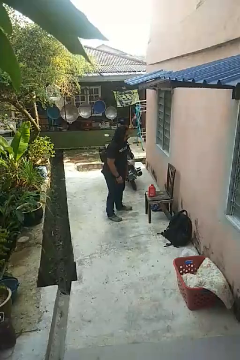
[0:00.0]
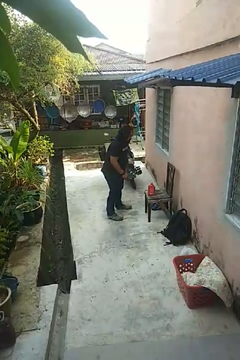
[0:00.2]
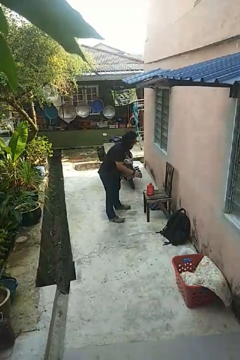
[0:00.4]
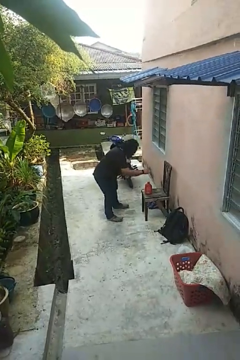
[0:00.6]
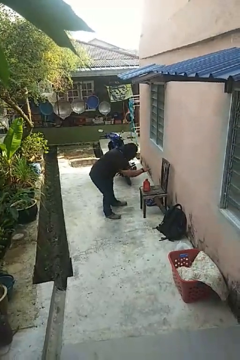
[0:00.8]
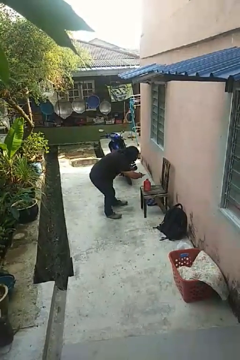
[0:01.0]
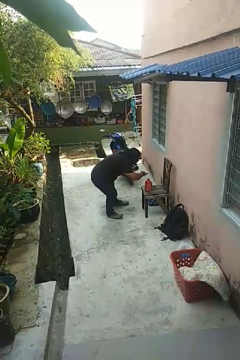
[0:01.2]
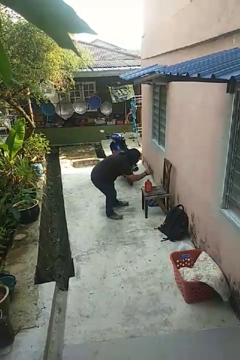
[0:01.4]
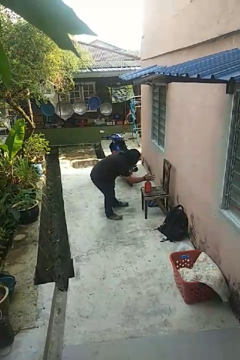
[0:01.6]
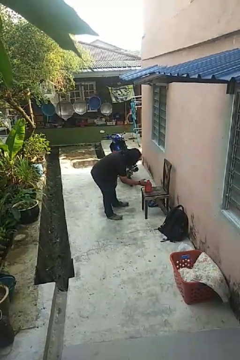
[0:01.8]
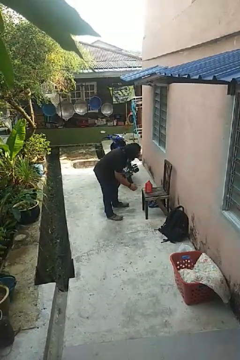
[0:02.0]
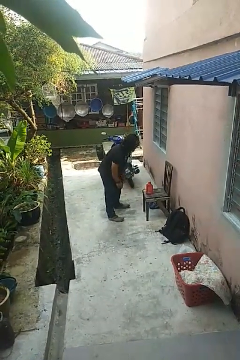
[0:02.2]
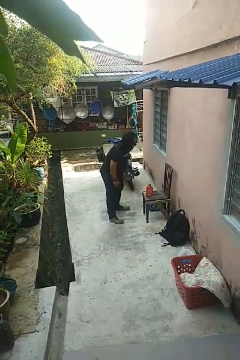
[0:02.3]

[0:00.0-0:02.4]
person waves hand over object

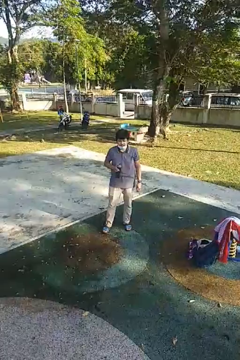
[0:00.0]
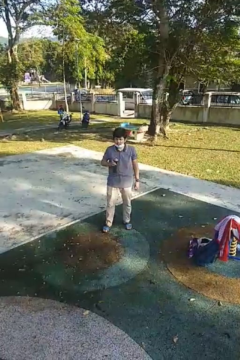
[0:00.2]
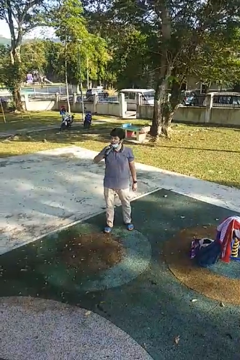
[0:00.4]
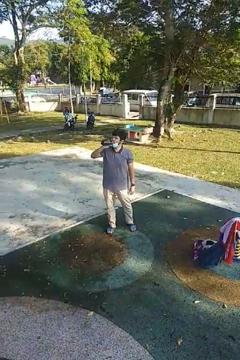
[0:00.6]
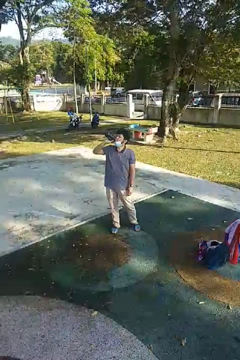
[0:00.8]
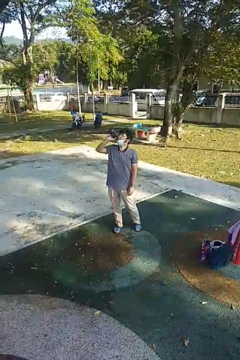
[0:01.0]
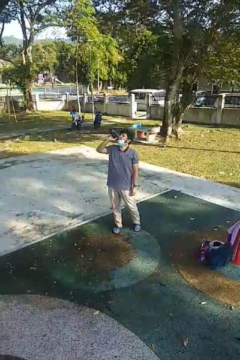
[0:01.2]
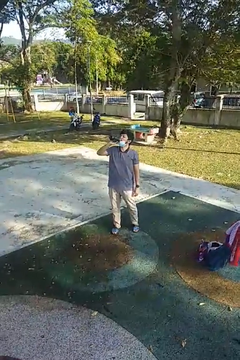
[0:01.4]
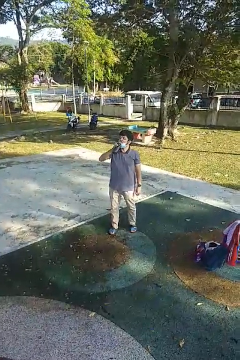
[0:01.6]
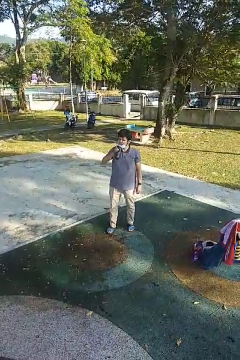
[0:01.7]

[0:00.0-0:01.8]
person drinks from bottle

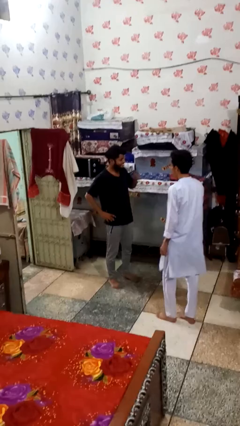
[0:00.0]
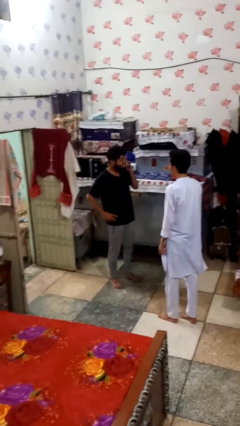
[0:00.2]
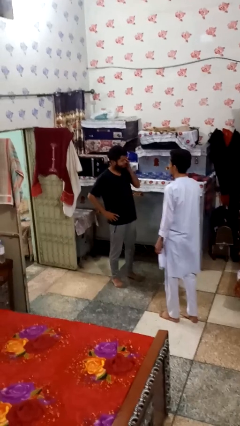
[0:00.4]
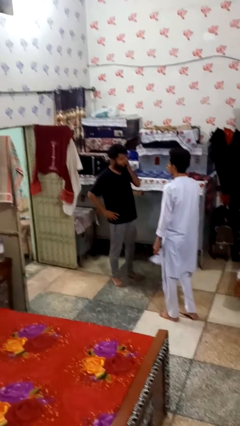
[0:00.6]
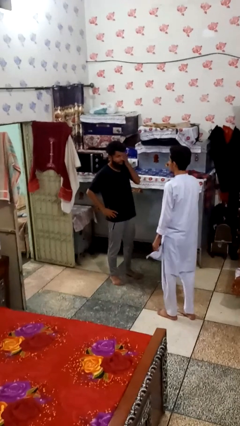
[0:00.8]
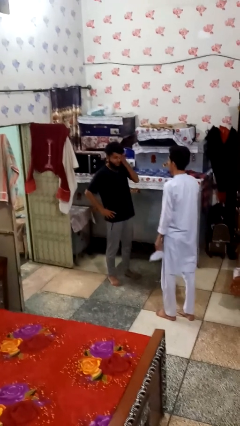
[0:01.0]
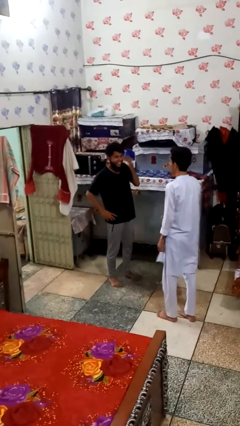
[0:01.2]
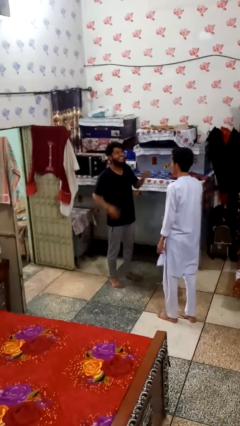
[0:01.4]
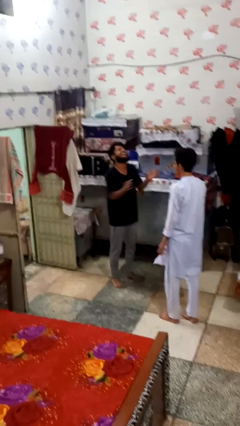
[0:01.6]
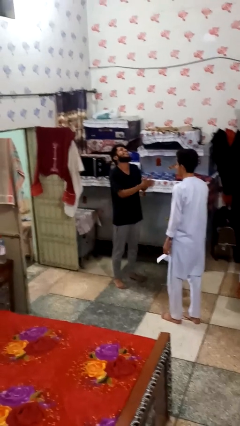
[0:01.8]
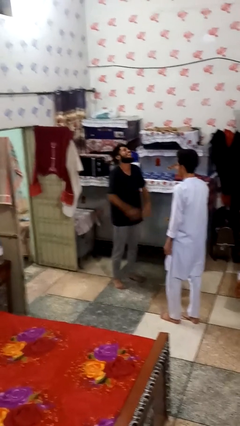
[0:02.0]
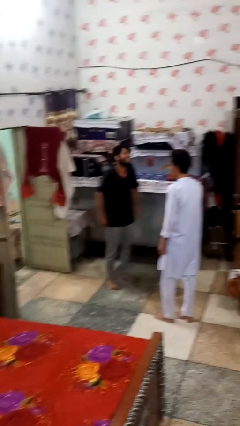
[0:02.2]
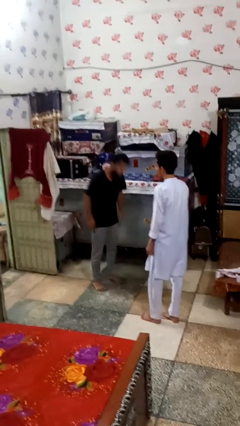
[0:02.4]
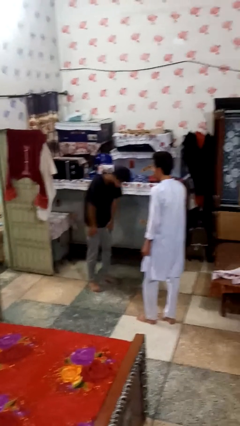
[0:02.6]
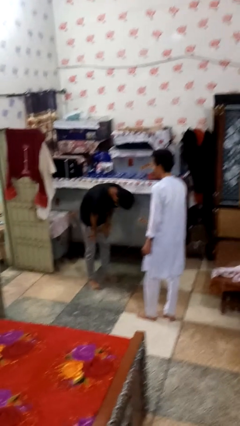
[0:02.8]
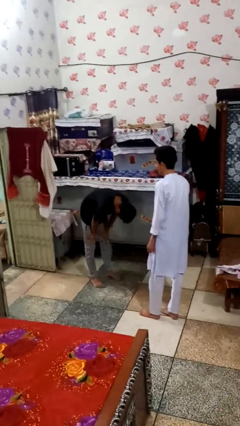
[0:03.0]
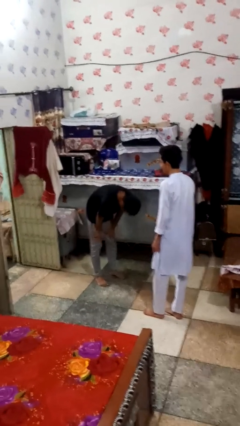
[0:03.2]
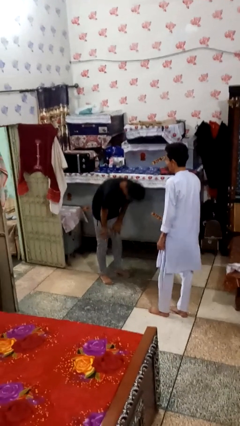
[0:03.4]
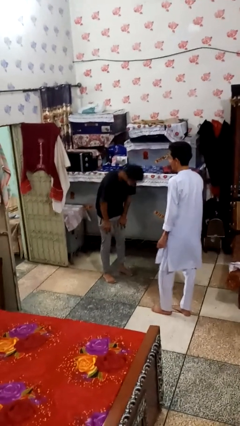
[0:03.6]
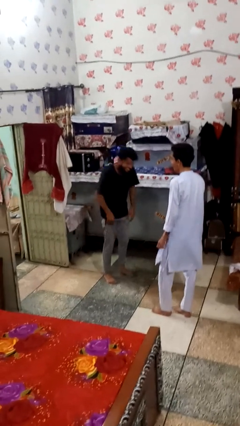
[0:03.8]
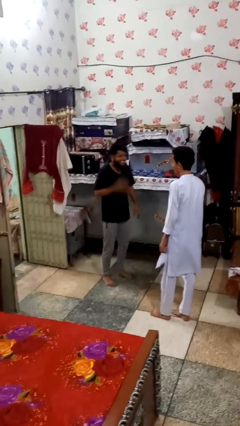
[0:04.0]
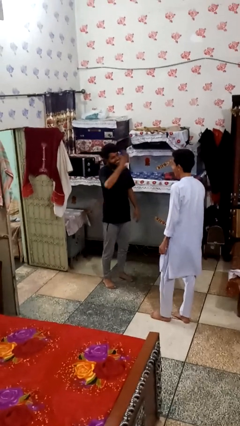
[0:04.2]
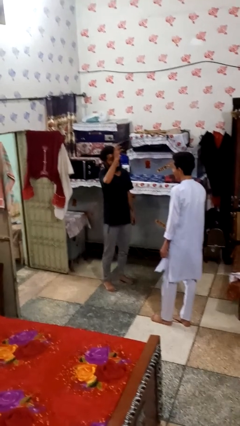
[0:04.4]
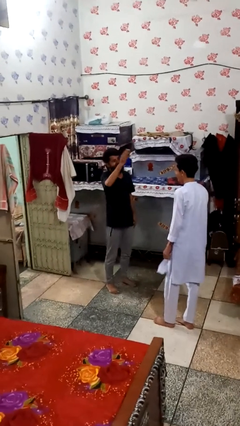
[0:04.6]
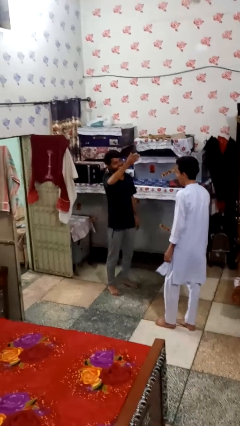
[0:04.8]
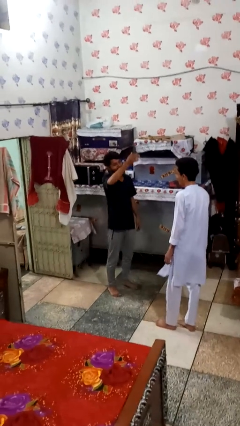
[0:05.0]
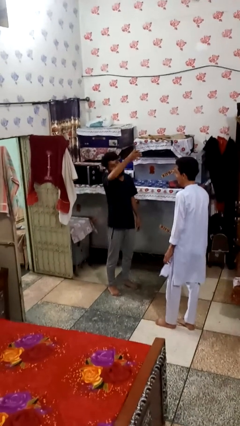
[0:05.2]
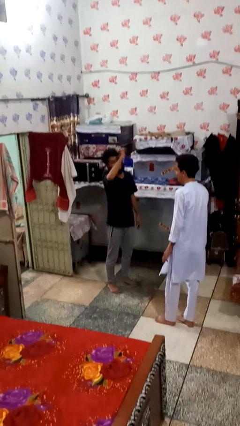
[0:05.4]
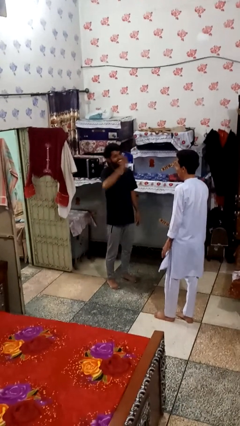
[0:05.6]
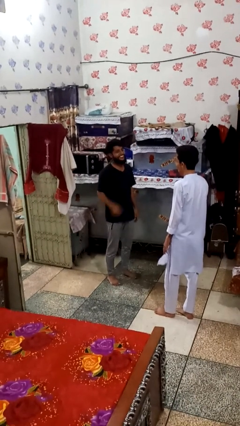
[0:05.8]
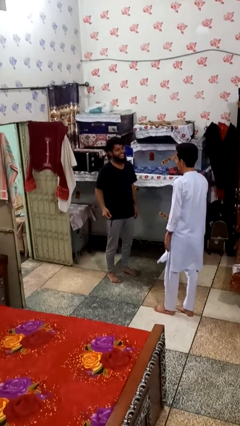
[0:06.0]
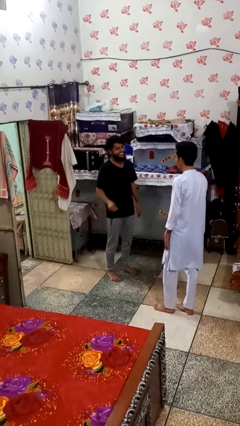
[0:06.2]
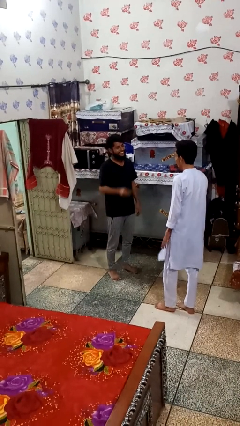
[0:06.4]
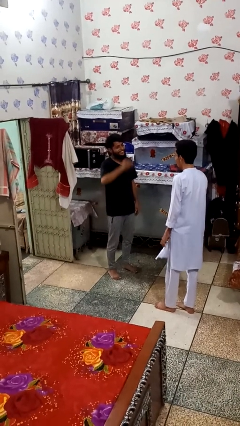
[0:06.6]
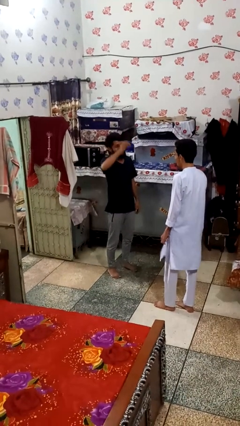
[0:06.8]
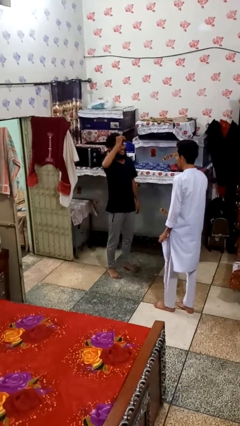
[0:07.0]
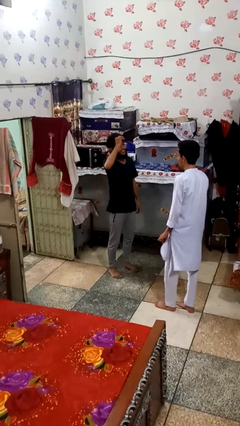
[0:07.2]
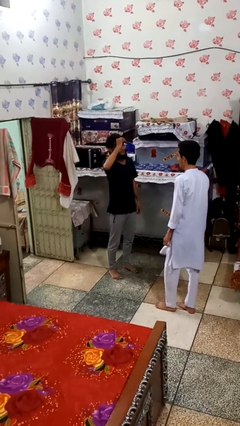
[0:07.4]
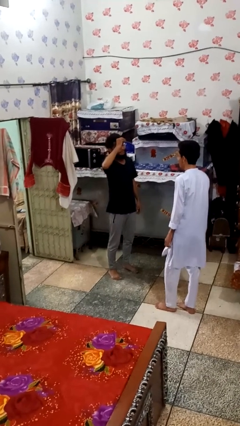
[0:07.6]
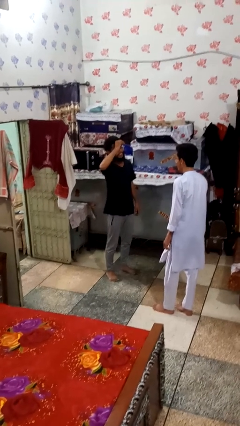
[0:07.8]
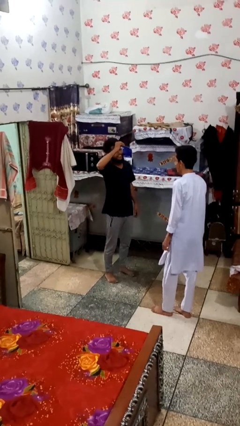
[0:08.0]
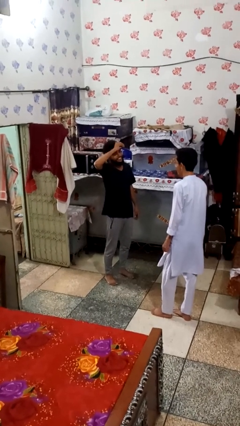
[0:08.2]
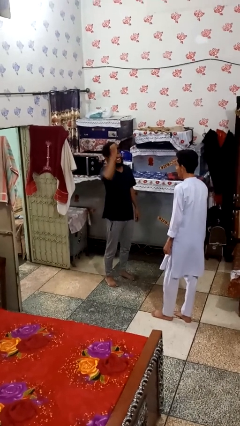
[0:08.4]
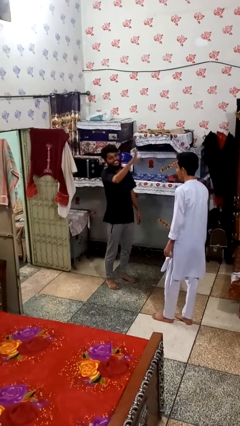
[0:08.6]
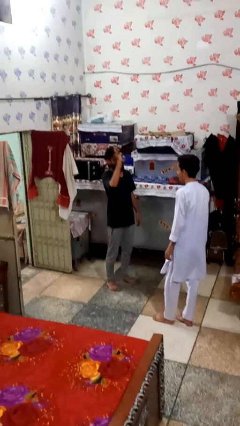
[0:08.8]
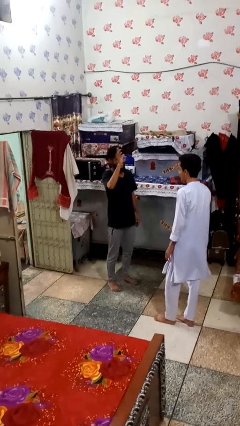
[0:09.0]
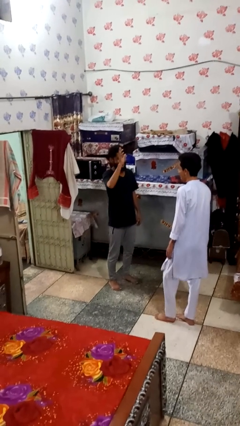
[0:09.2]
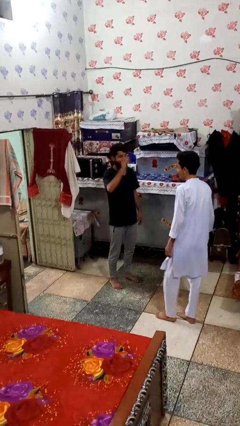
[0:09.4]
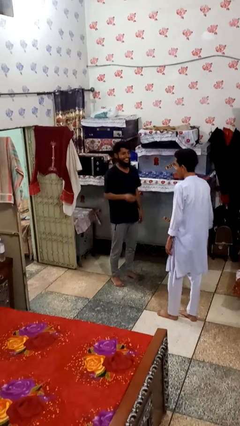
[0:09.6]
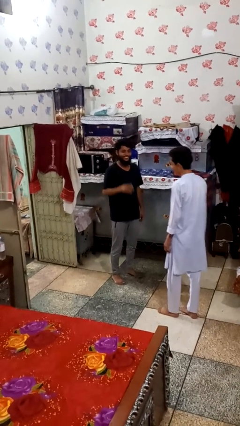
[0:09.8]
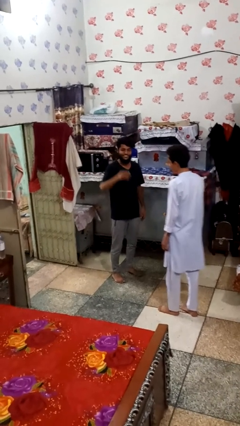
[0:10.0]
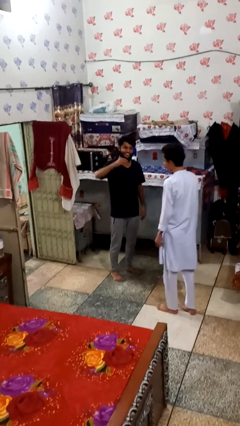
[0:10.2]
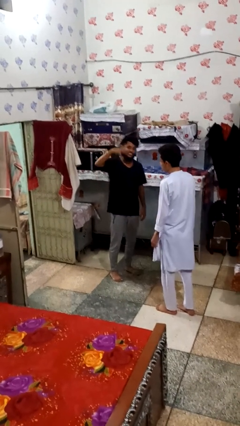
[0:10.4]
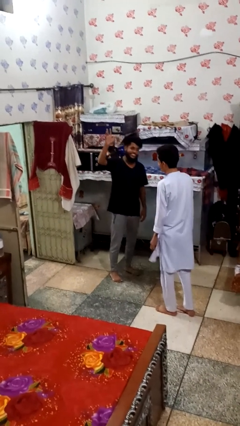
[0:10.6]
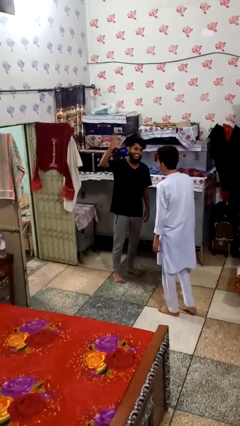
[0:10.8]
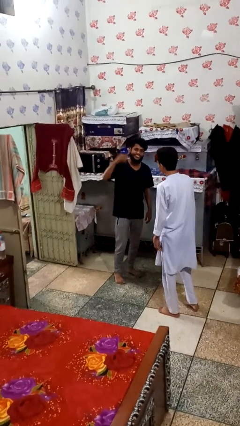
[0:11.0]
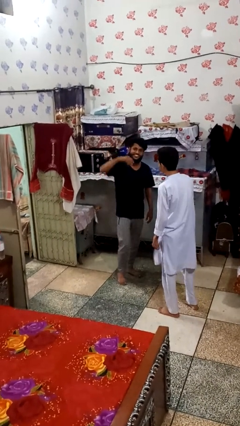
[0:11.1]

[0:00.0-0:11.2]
person laughs with person

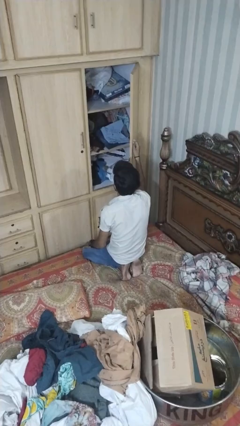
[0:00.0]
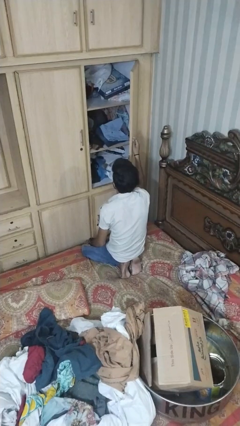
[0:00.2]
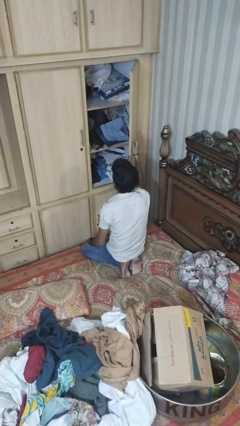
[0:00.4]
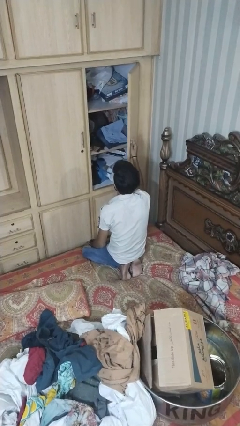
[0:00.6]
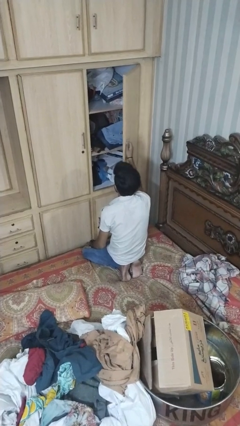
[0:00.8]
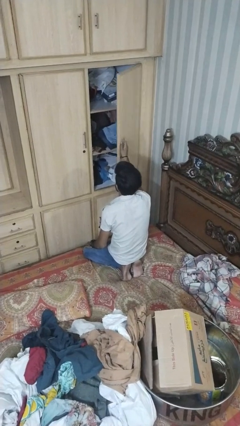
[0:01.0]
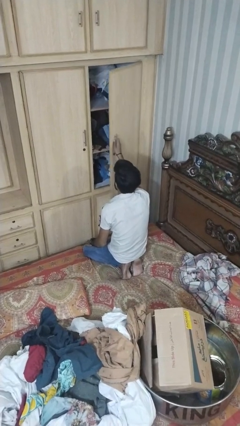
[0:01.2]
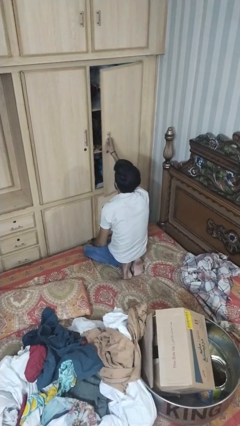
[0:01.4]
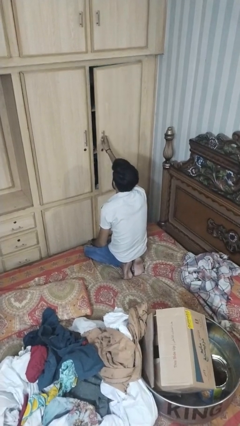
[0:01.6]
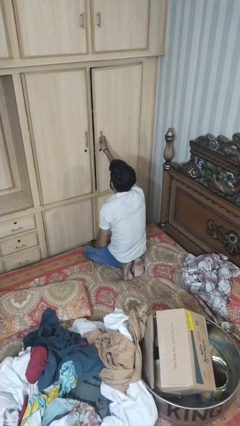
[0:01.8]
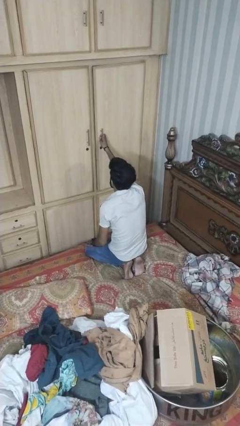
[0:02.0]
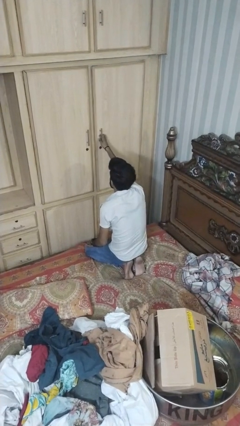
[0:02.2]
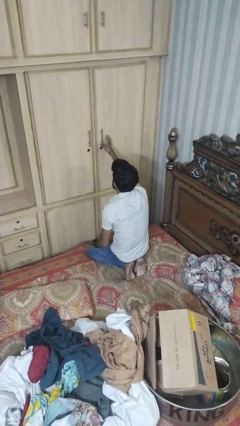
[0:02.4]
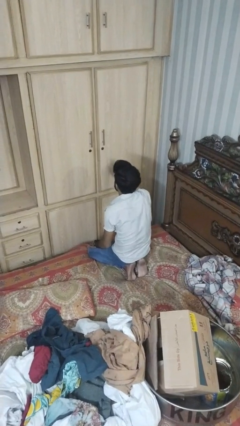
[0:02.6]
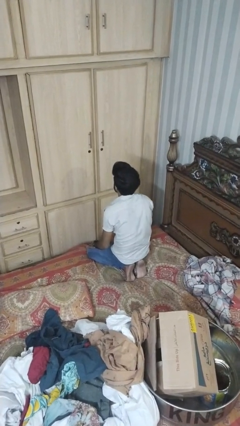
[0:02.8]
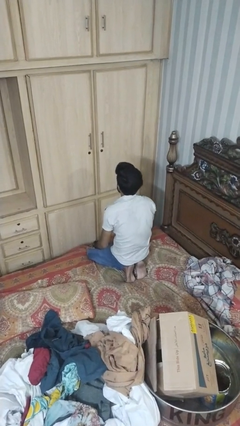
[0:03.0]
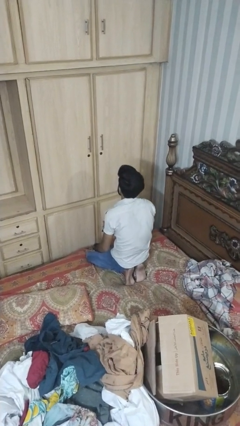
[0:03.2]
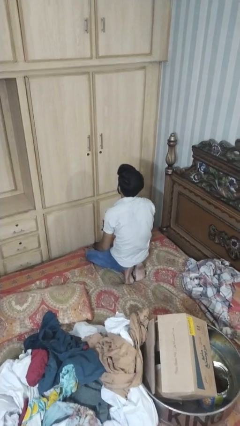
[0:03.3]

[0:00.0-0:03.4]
person closes dresser drawer
